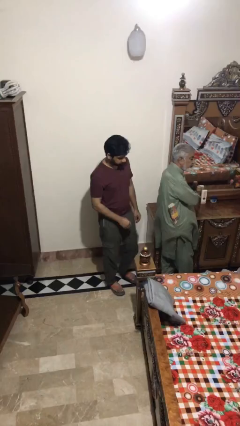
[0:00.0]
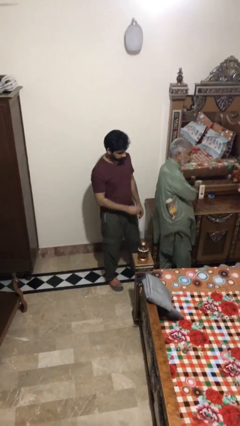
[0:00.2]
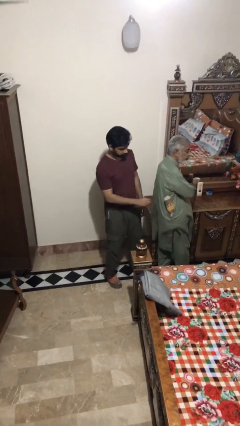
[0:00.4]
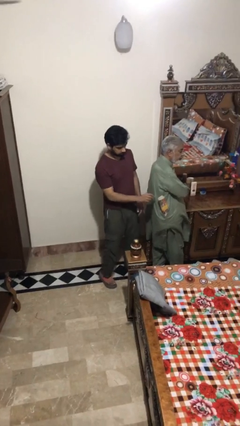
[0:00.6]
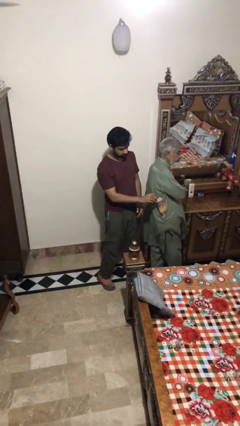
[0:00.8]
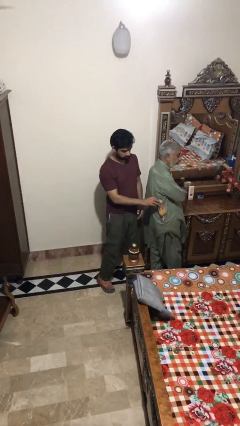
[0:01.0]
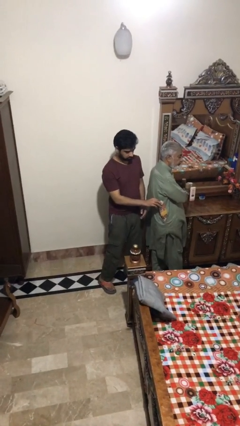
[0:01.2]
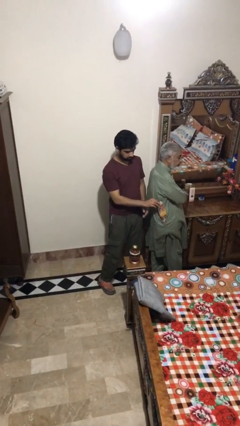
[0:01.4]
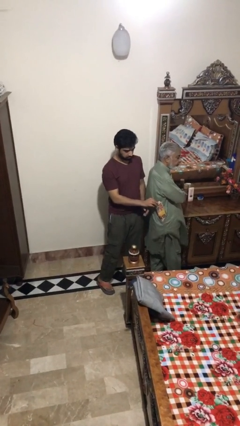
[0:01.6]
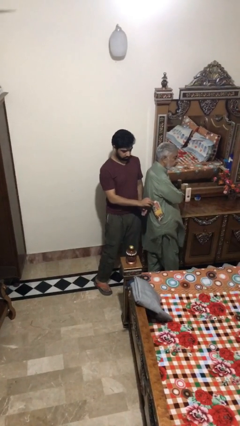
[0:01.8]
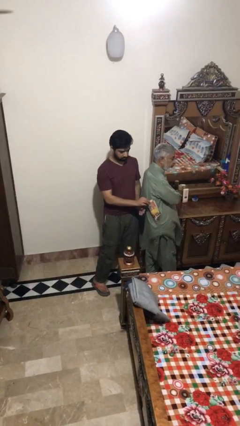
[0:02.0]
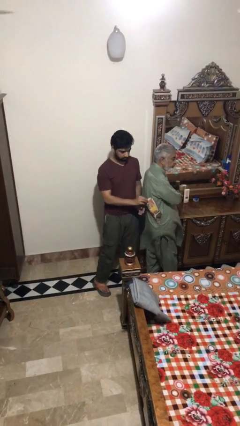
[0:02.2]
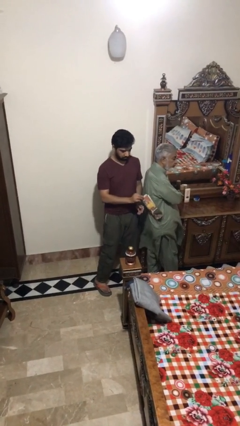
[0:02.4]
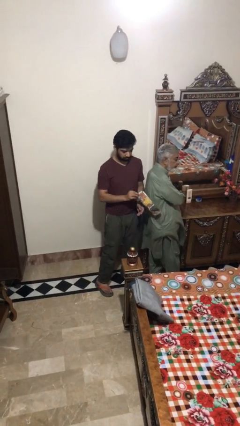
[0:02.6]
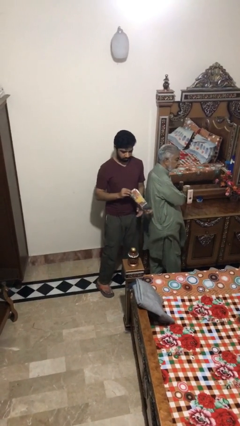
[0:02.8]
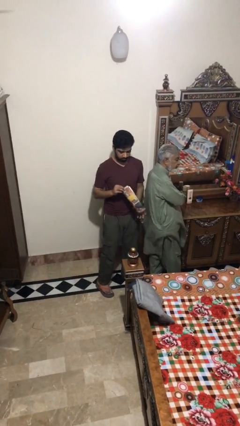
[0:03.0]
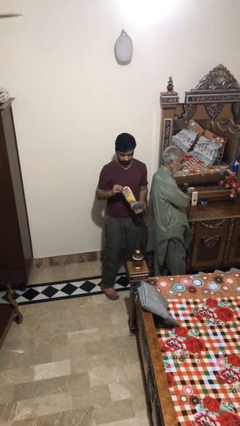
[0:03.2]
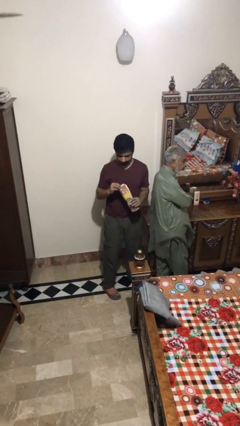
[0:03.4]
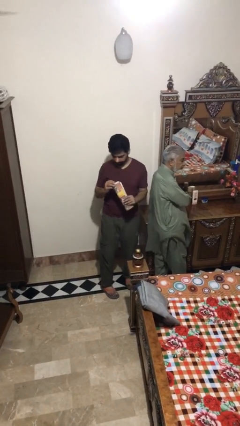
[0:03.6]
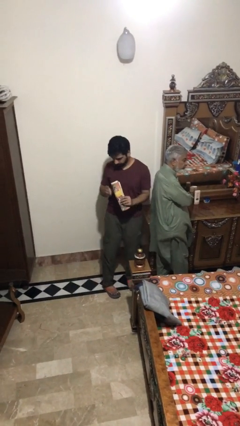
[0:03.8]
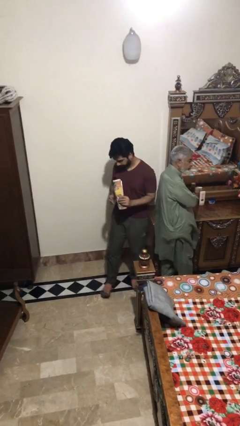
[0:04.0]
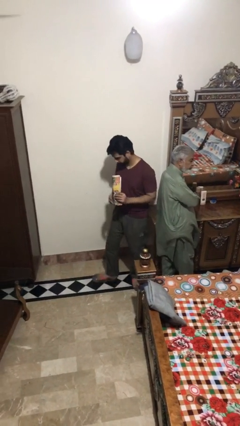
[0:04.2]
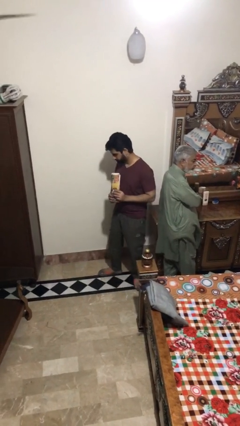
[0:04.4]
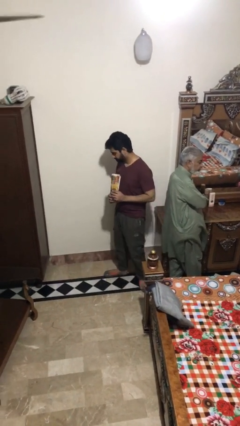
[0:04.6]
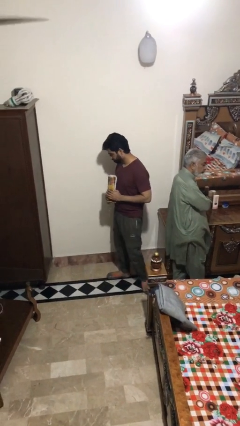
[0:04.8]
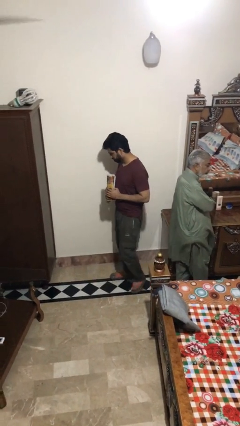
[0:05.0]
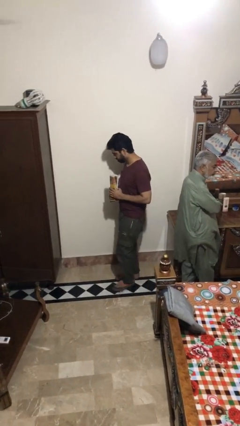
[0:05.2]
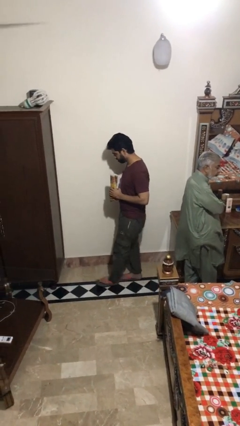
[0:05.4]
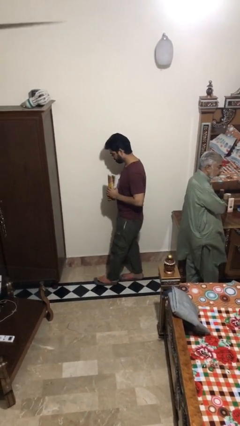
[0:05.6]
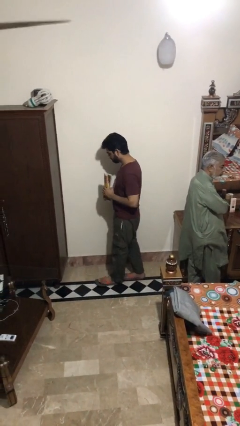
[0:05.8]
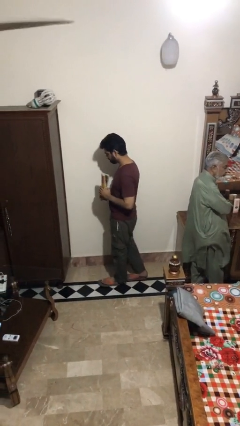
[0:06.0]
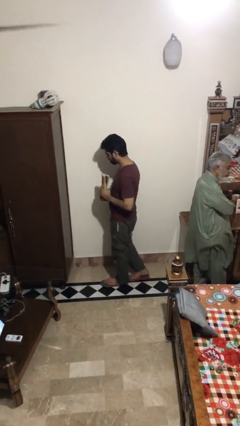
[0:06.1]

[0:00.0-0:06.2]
person steals object from person

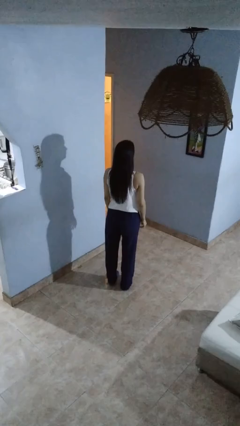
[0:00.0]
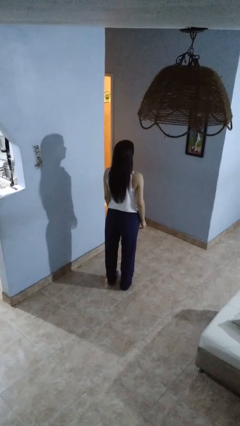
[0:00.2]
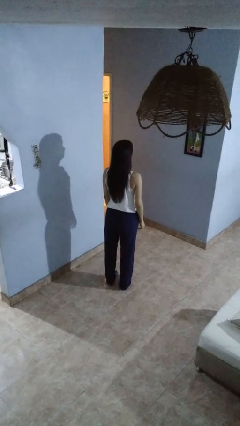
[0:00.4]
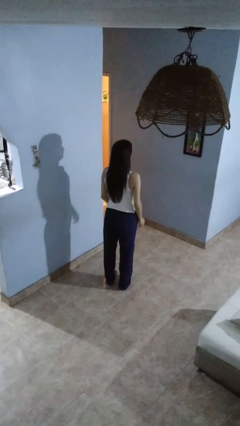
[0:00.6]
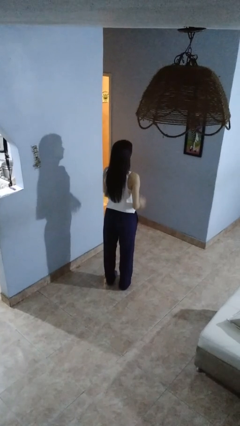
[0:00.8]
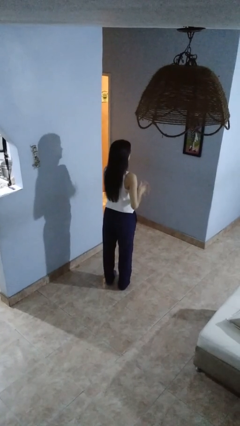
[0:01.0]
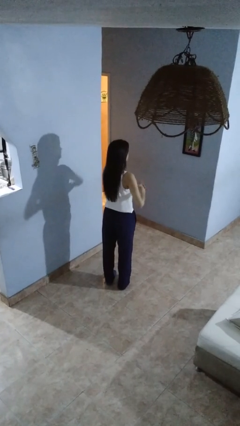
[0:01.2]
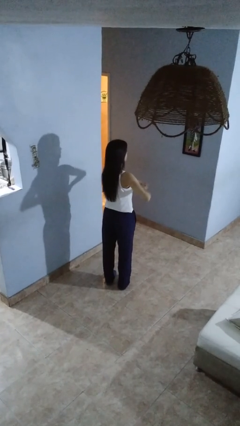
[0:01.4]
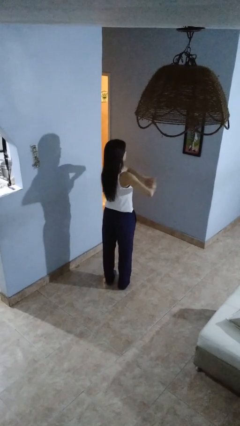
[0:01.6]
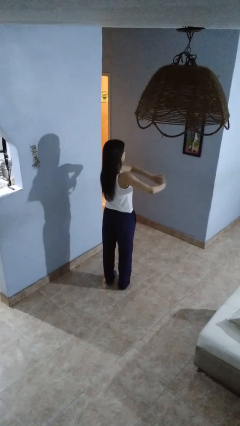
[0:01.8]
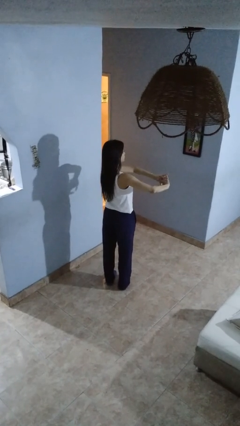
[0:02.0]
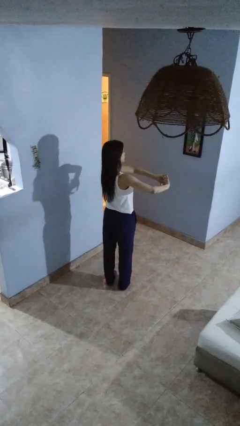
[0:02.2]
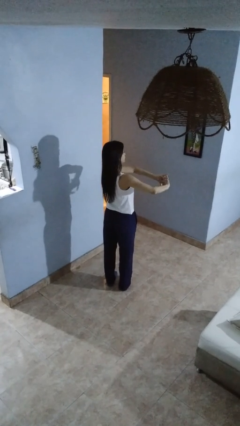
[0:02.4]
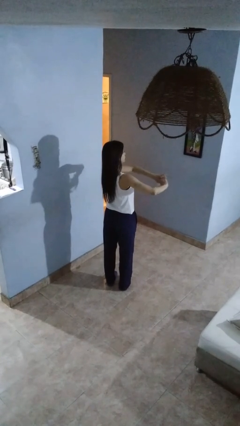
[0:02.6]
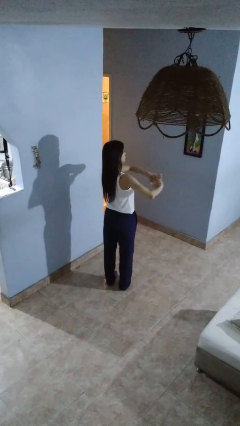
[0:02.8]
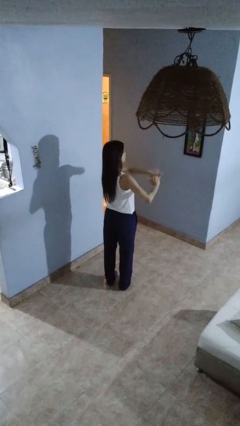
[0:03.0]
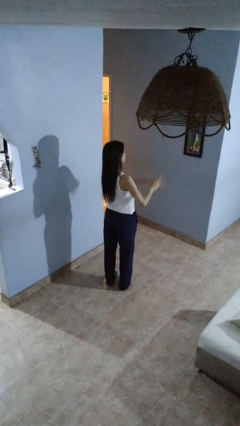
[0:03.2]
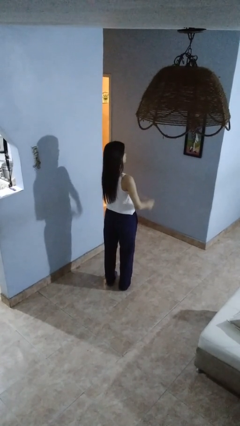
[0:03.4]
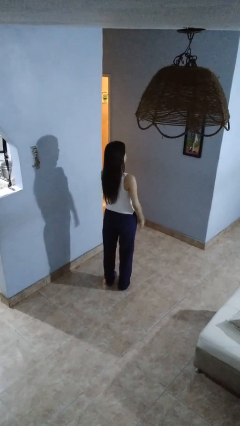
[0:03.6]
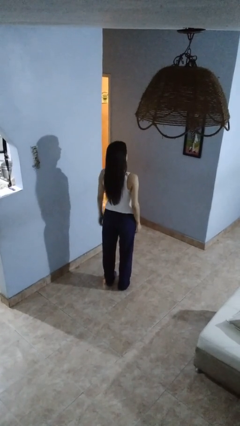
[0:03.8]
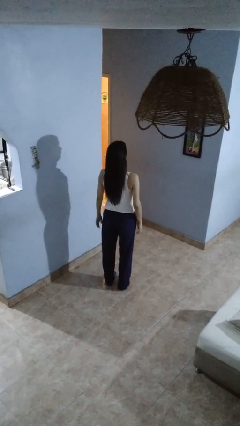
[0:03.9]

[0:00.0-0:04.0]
person cracks knuckles

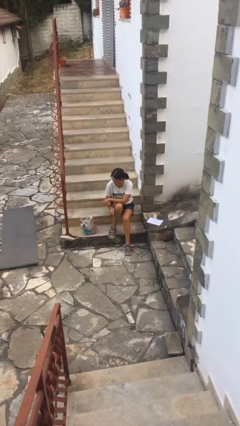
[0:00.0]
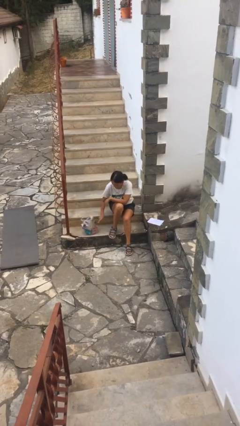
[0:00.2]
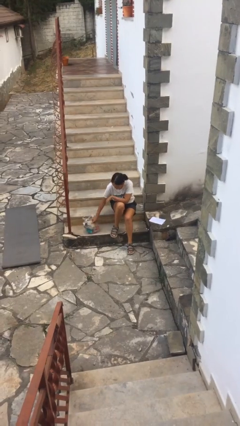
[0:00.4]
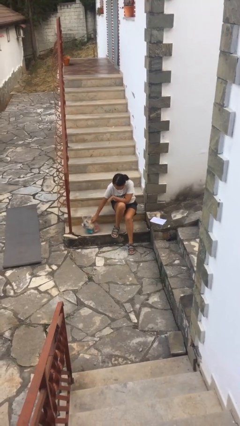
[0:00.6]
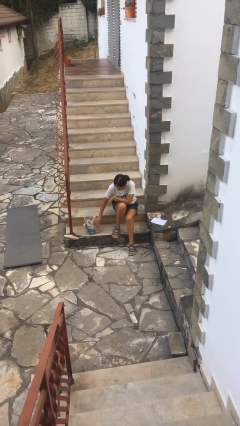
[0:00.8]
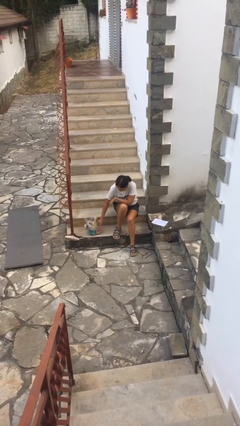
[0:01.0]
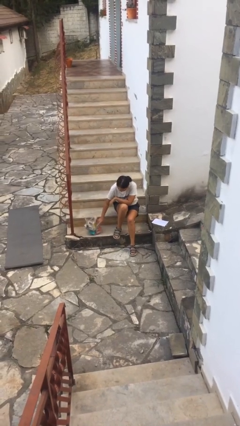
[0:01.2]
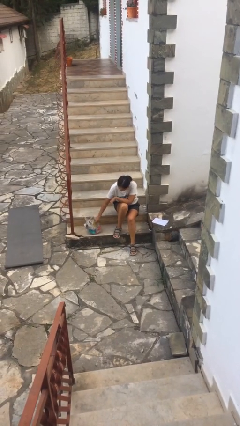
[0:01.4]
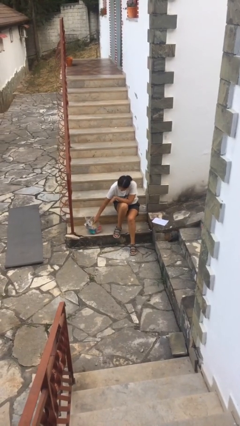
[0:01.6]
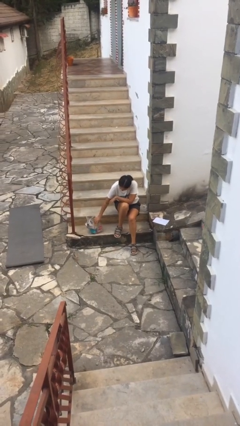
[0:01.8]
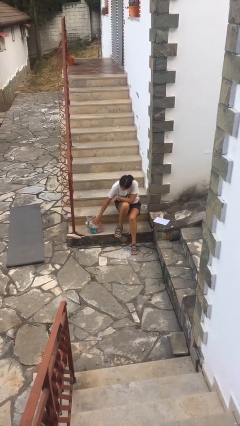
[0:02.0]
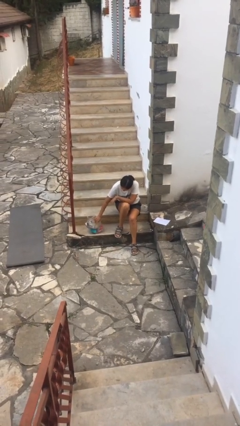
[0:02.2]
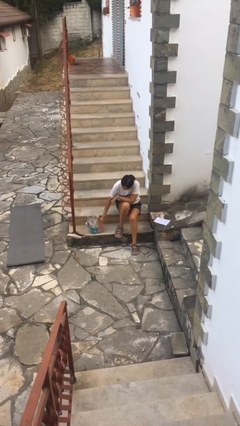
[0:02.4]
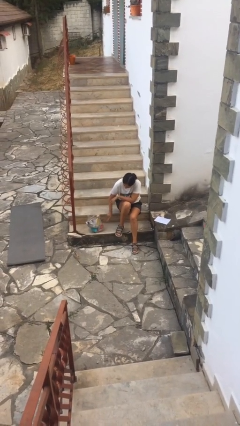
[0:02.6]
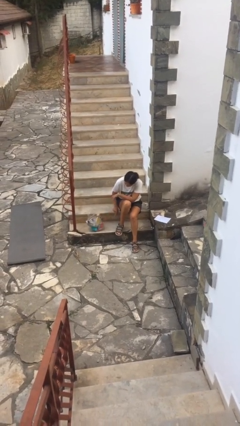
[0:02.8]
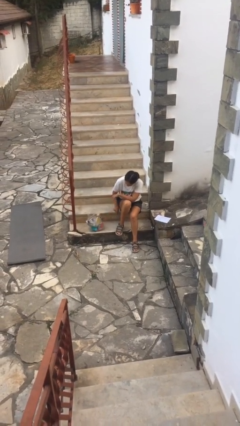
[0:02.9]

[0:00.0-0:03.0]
person taps object with finger

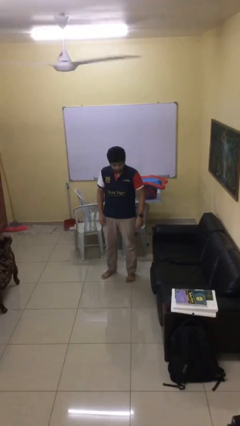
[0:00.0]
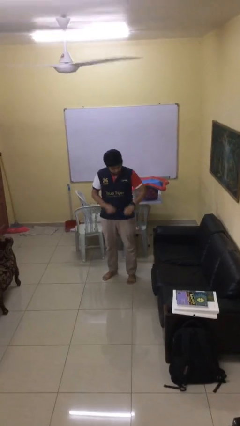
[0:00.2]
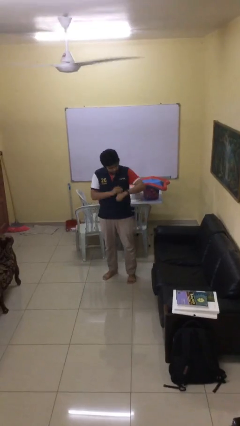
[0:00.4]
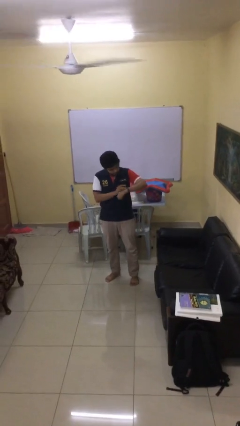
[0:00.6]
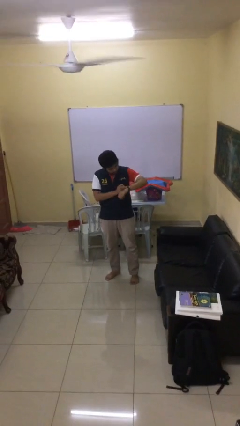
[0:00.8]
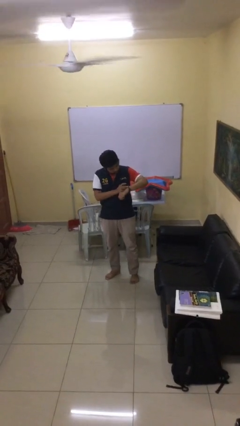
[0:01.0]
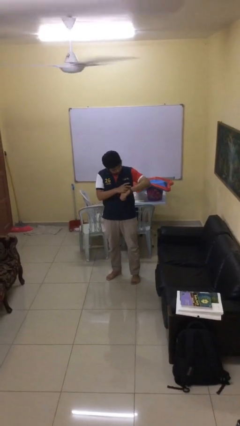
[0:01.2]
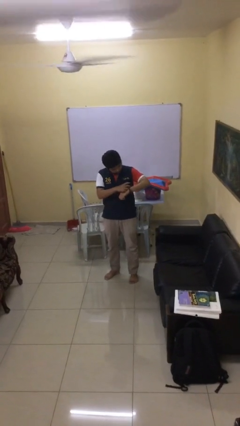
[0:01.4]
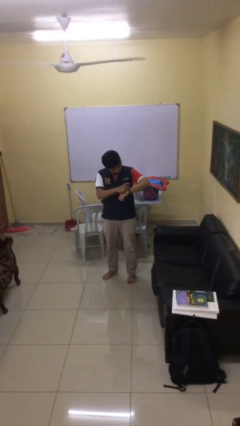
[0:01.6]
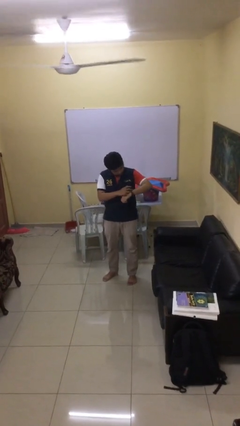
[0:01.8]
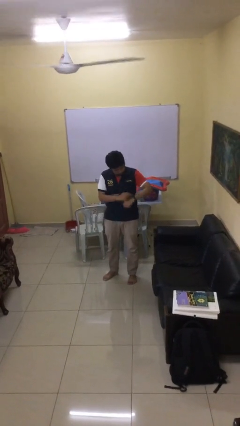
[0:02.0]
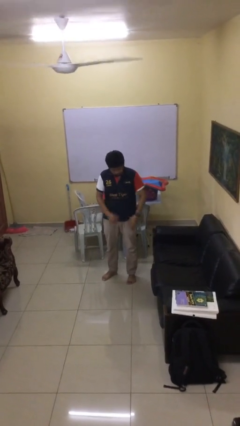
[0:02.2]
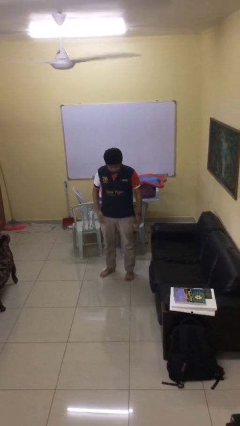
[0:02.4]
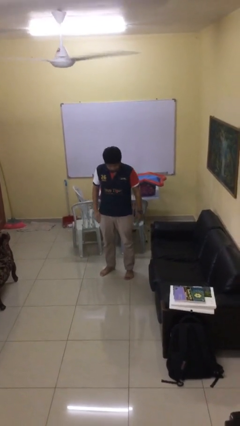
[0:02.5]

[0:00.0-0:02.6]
person looks at wristwatch

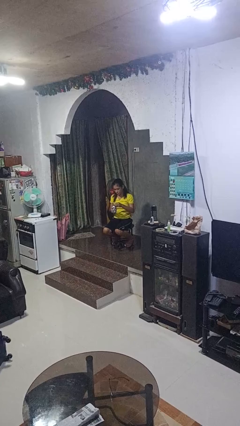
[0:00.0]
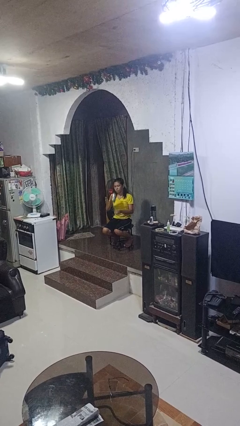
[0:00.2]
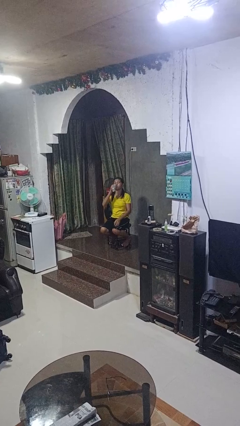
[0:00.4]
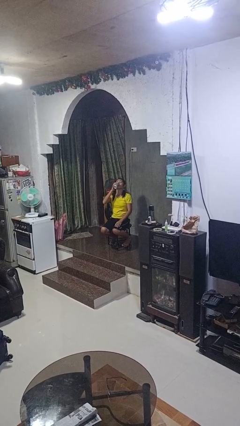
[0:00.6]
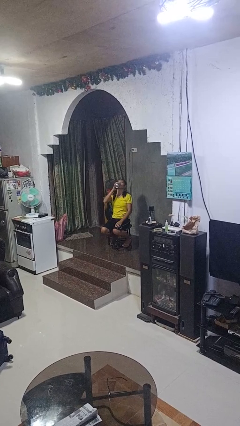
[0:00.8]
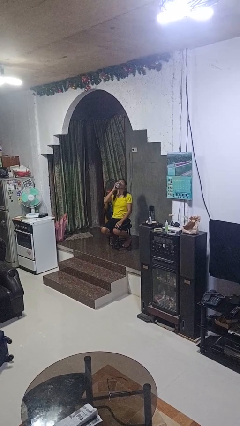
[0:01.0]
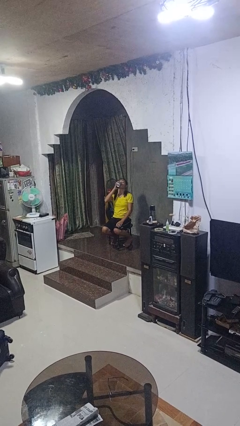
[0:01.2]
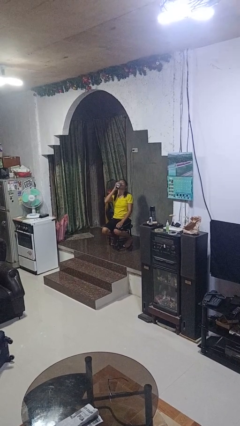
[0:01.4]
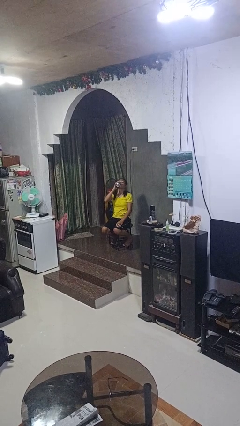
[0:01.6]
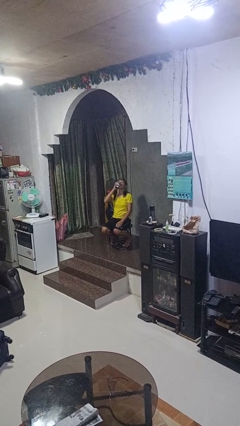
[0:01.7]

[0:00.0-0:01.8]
person drinks from beverage can
